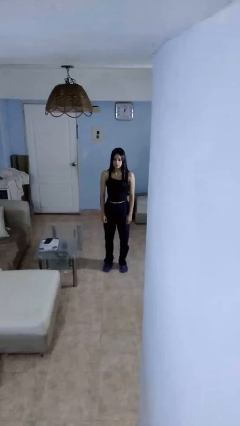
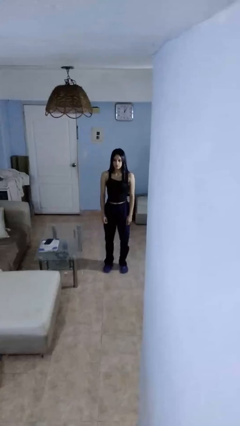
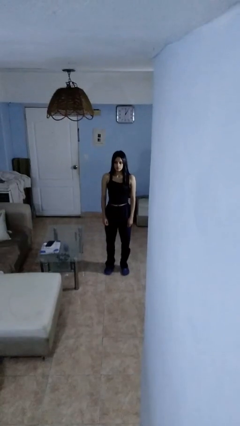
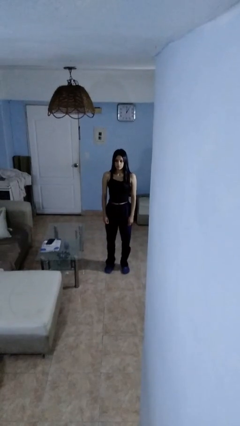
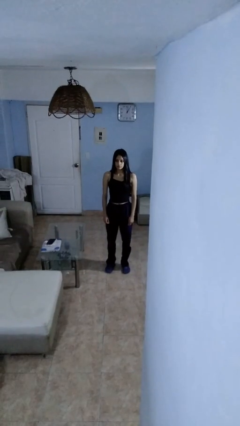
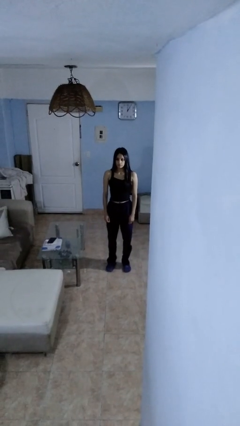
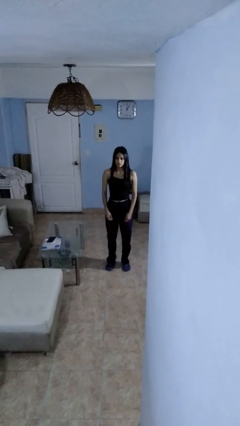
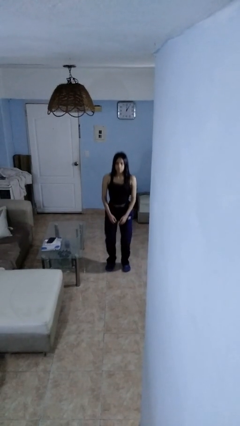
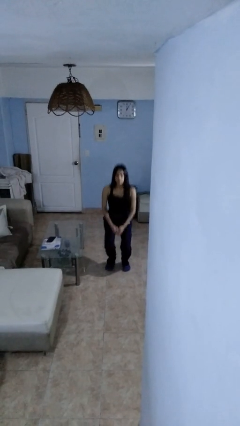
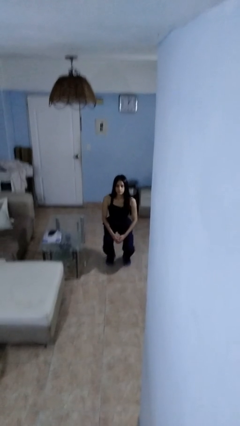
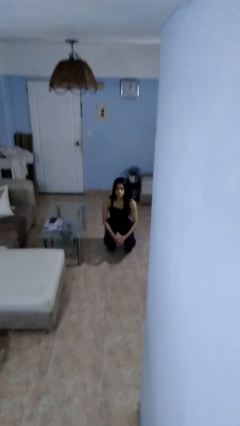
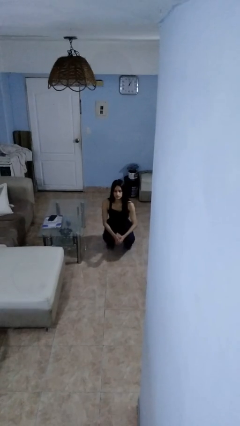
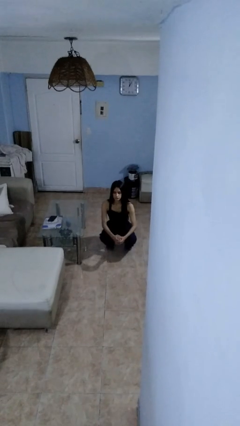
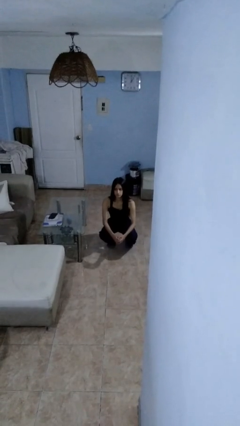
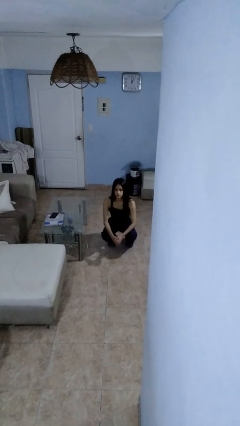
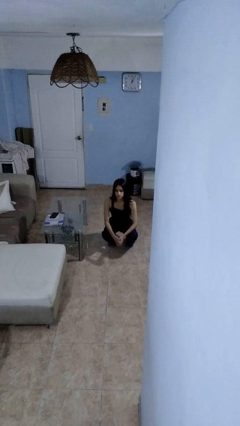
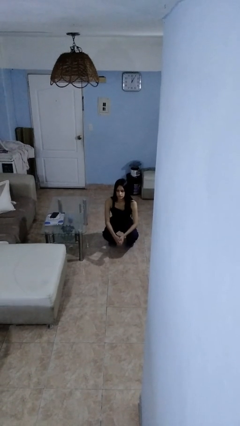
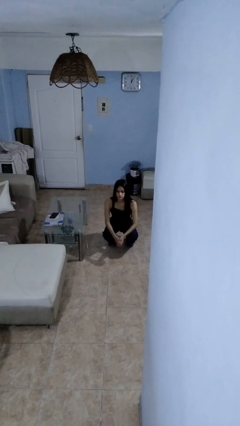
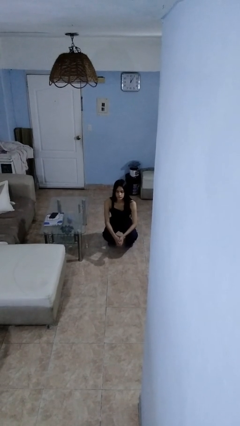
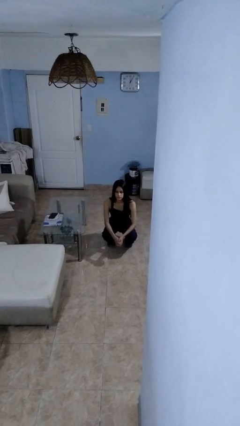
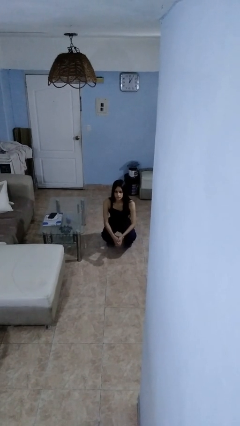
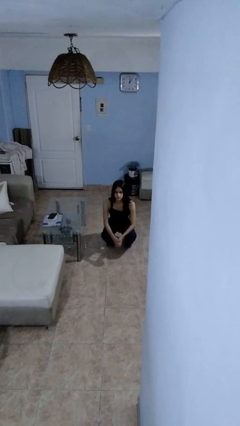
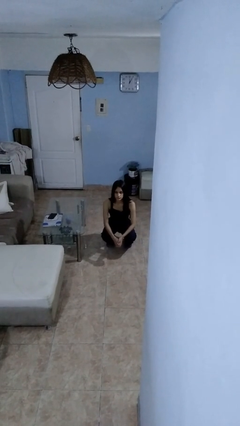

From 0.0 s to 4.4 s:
person squats

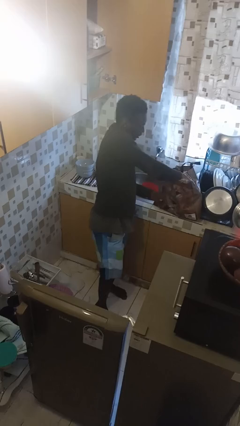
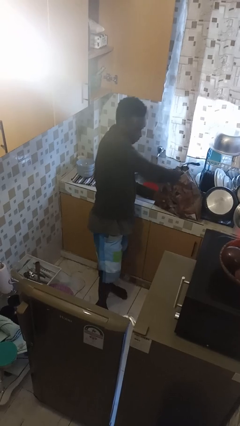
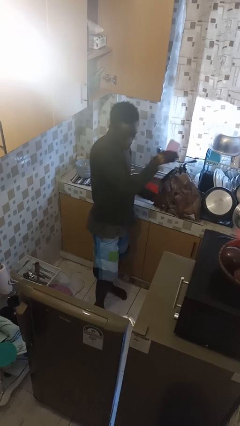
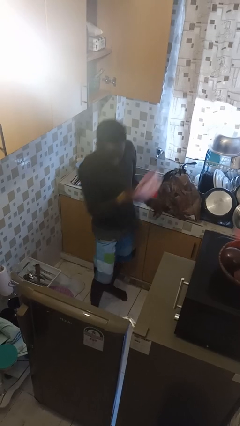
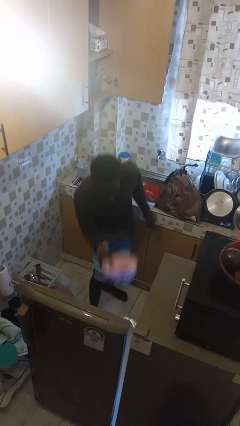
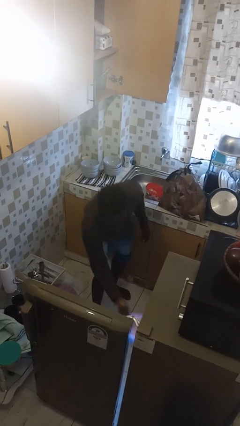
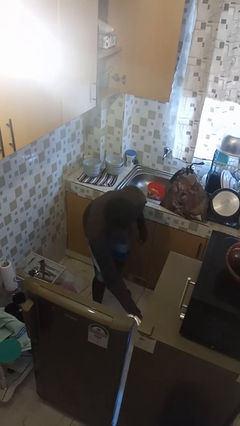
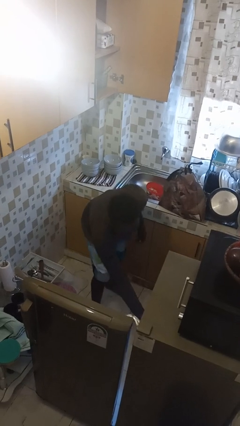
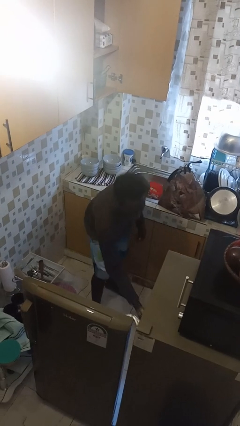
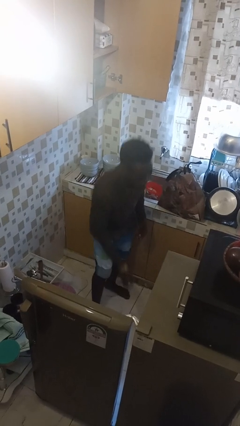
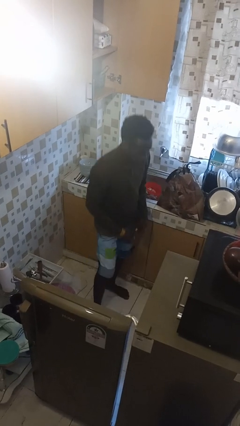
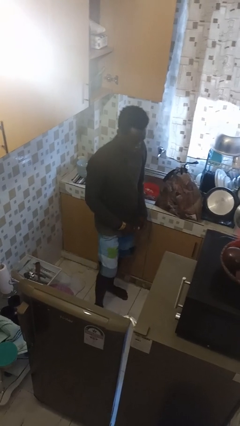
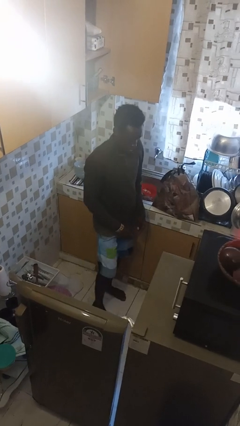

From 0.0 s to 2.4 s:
person loads groceries into refrigerator

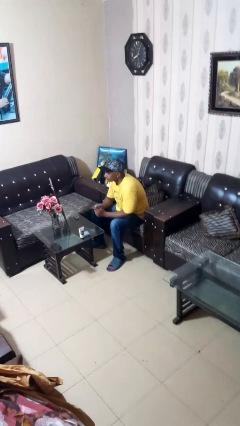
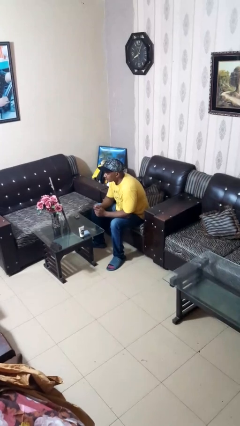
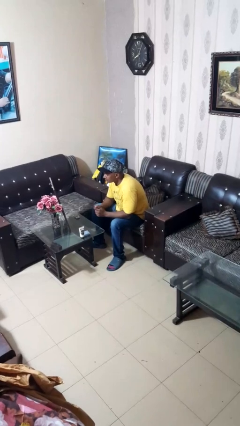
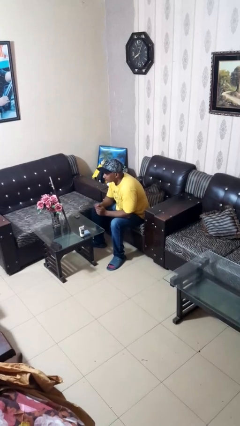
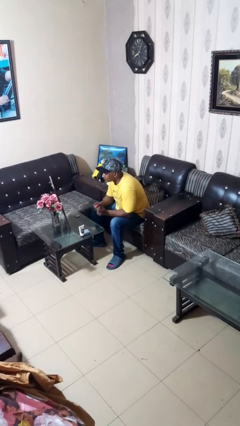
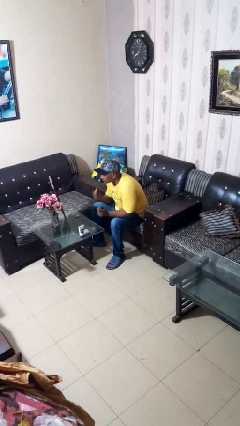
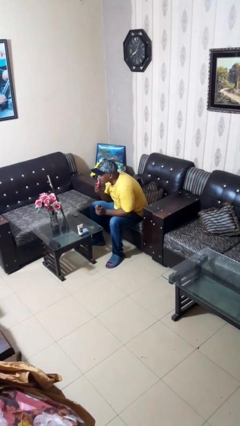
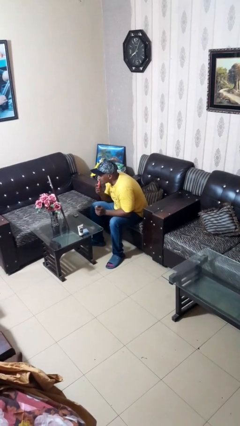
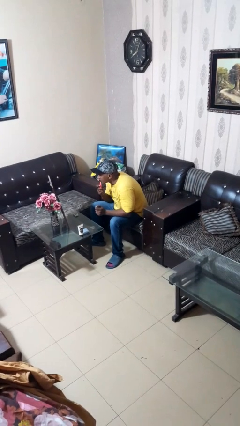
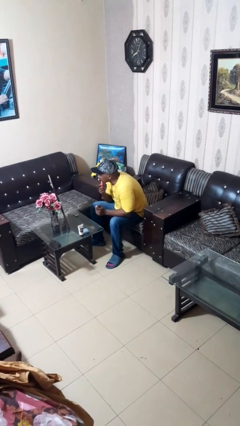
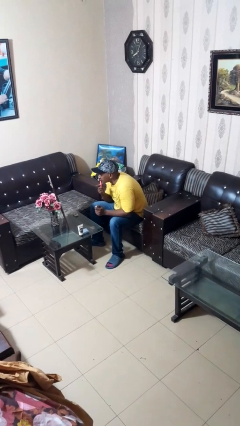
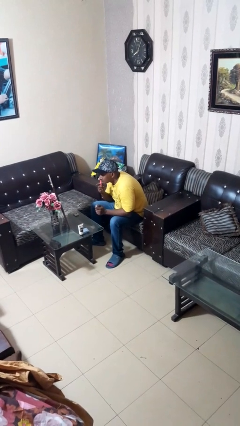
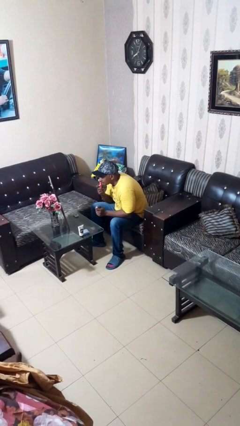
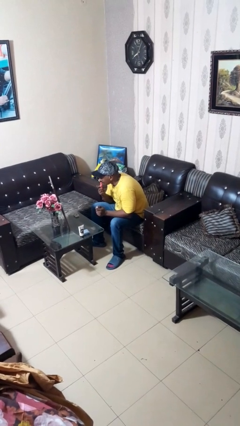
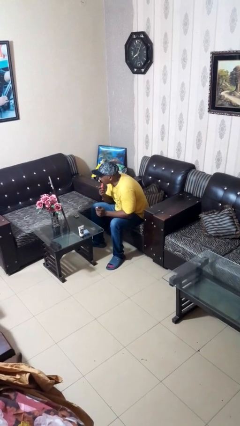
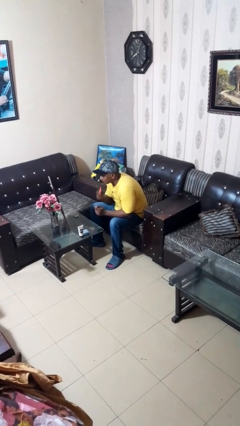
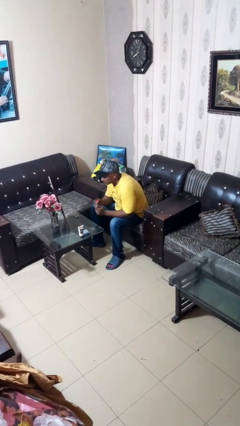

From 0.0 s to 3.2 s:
person applies lip makeup

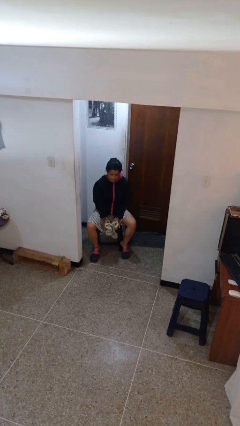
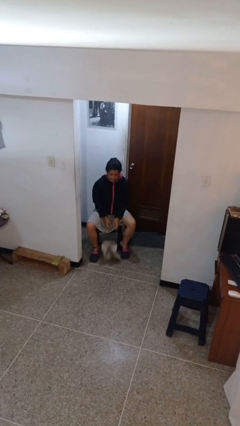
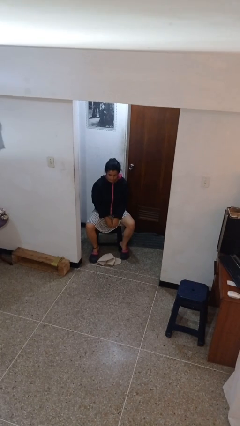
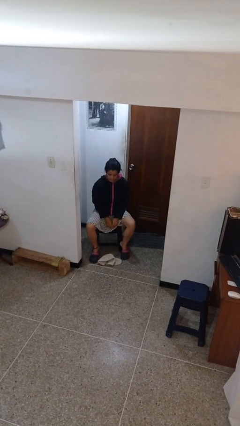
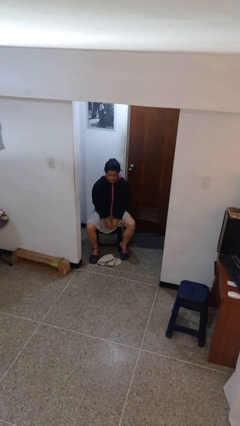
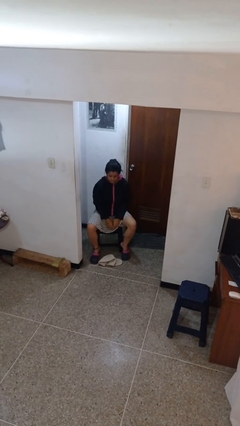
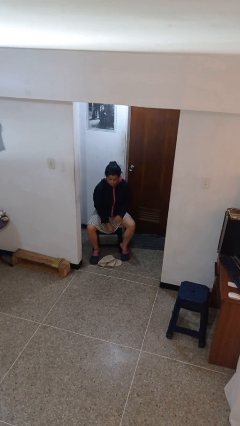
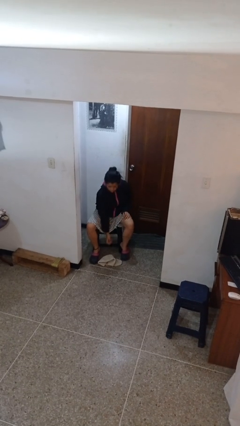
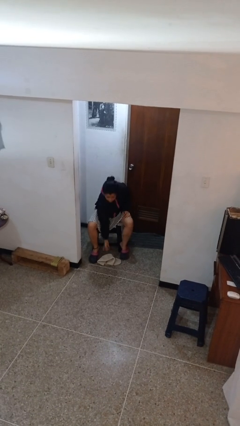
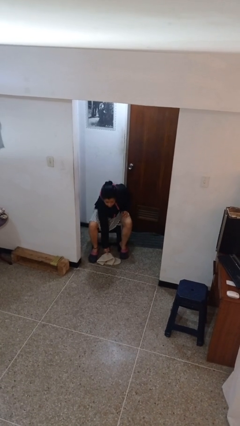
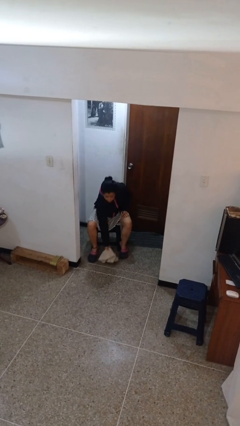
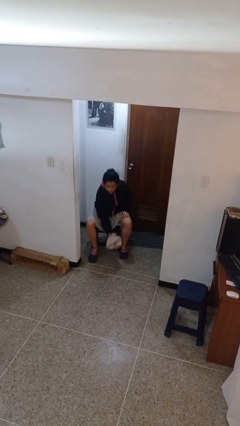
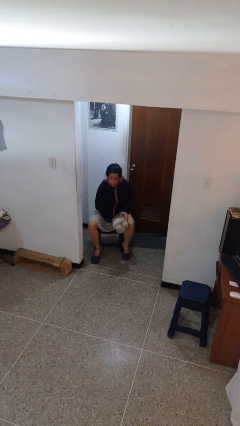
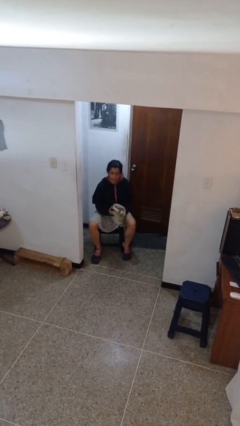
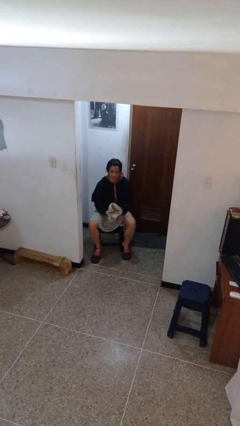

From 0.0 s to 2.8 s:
person picks up object from floor

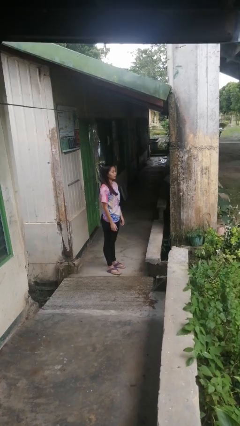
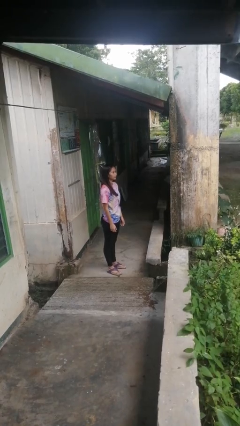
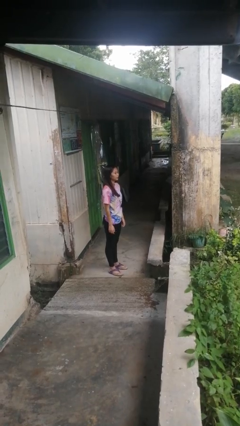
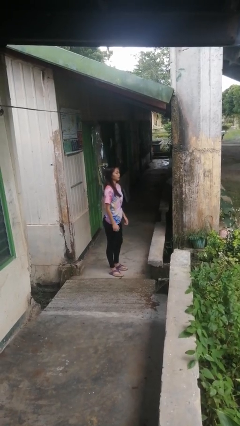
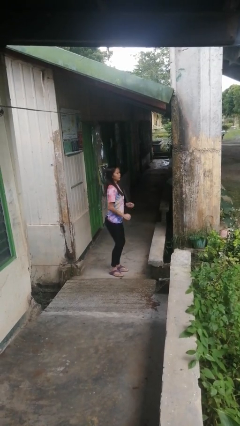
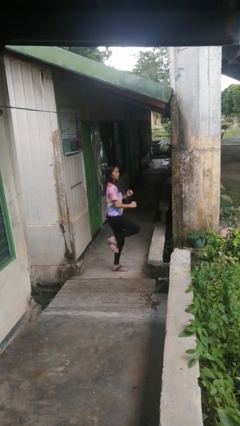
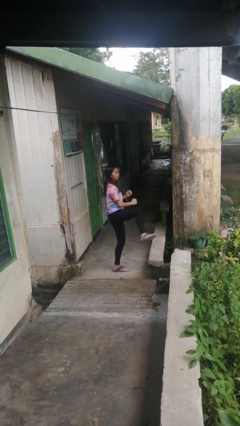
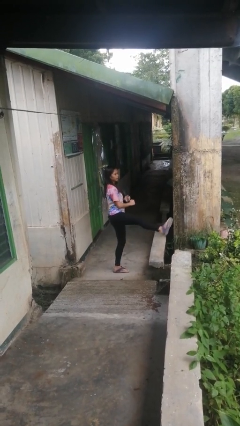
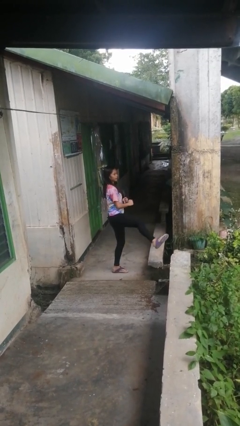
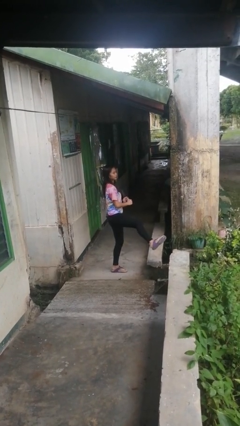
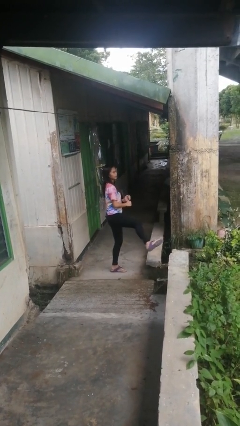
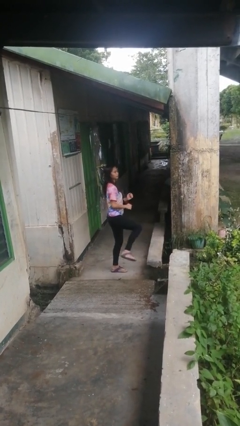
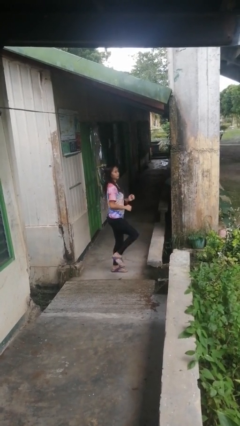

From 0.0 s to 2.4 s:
person karate kicks

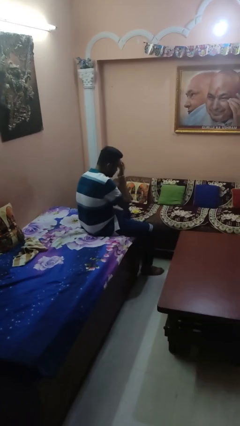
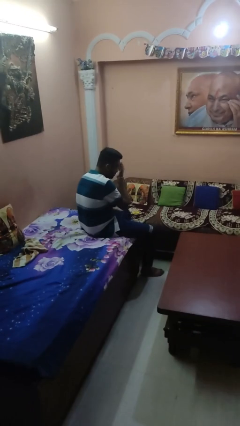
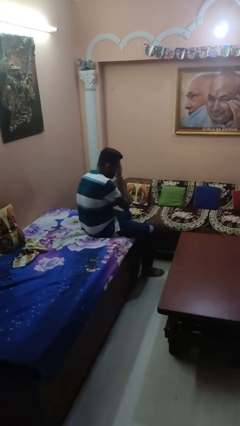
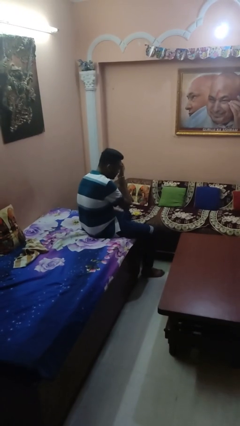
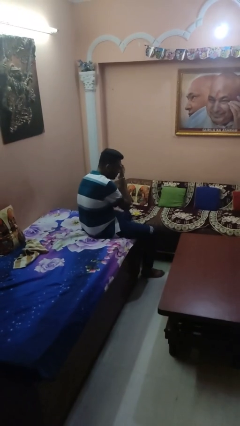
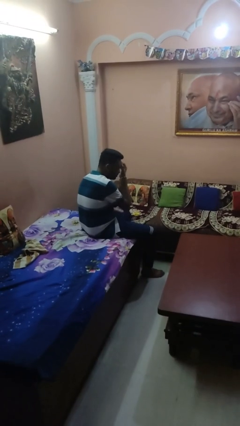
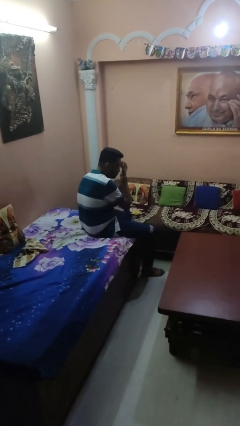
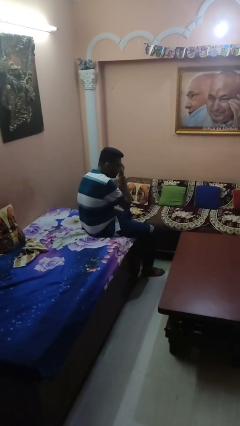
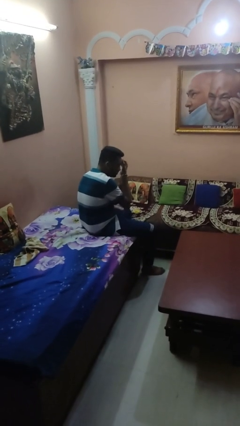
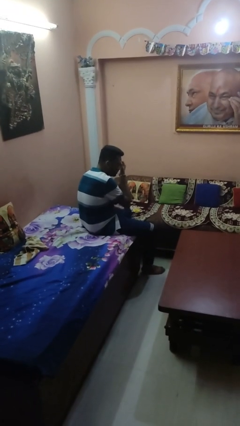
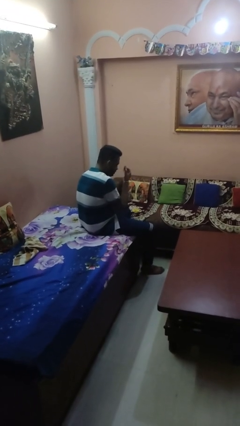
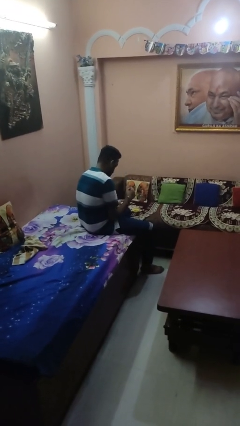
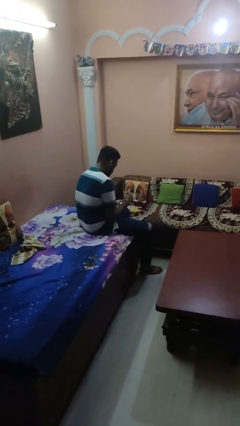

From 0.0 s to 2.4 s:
person applies foundation makeup
